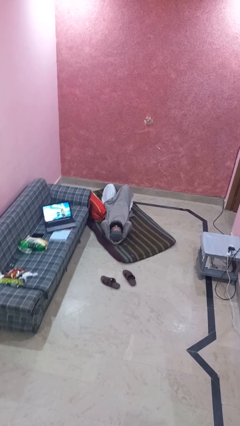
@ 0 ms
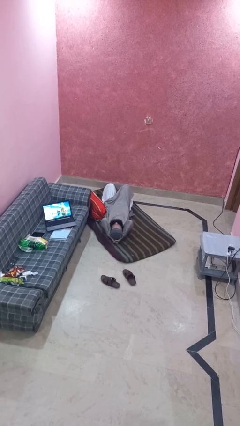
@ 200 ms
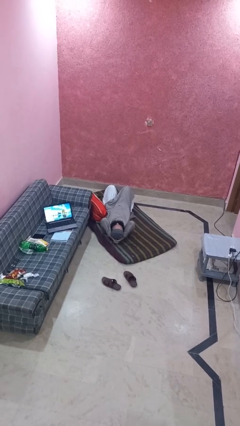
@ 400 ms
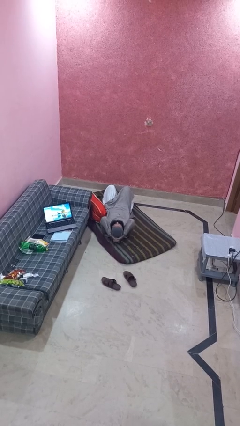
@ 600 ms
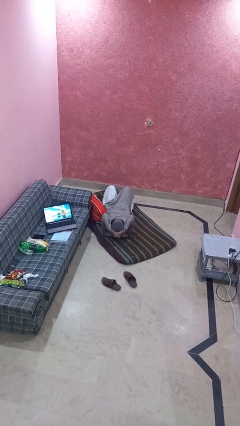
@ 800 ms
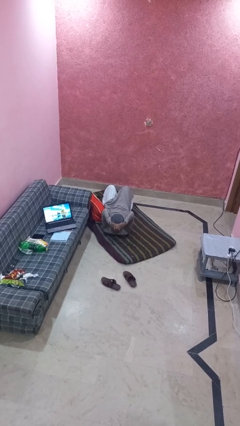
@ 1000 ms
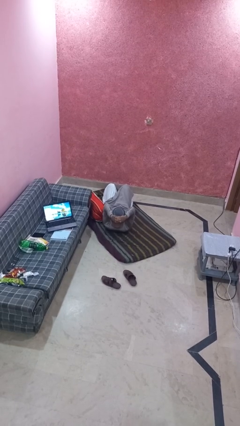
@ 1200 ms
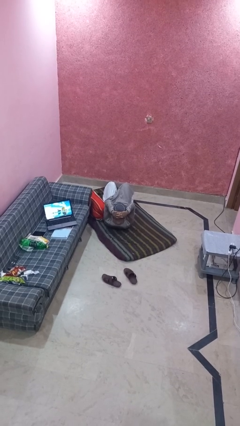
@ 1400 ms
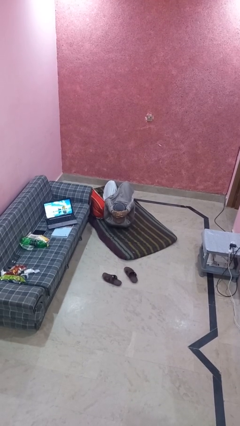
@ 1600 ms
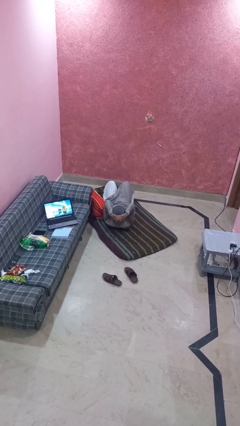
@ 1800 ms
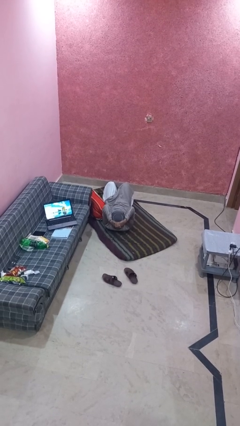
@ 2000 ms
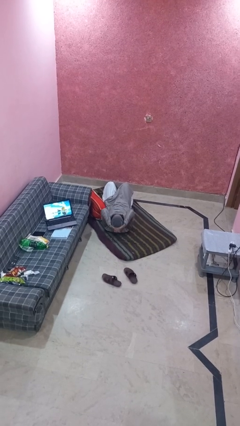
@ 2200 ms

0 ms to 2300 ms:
person exercises with situp

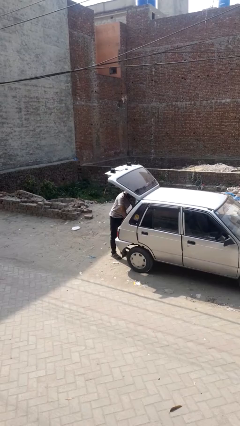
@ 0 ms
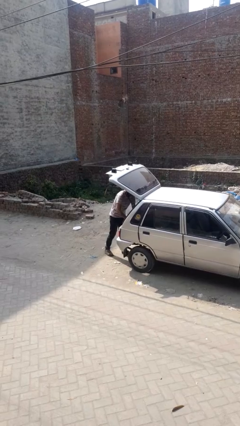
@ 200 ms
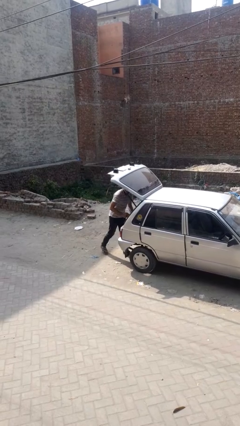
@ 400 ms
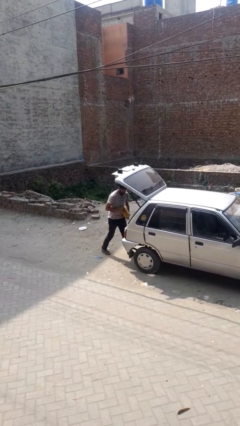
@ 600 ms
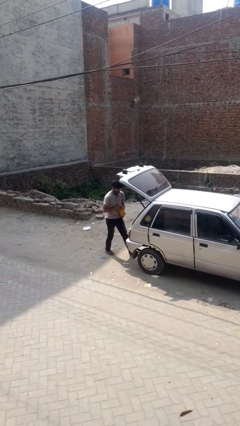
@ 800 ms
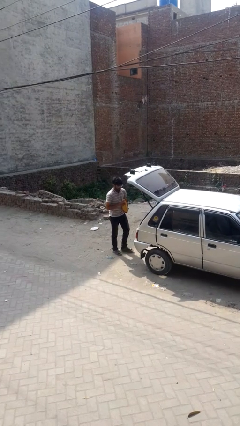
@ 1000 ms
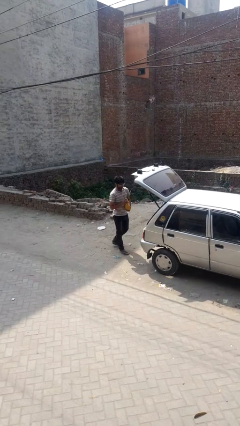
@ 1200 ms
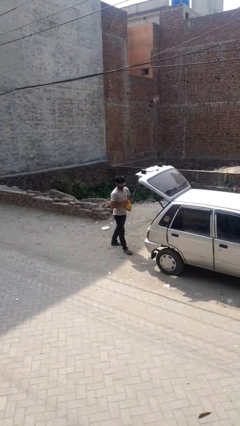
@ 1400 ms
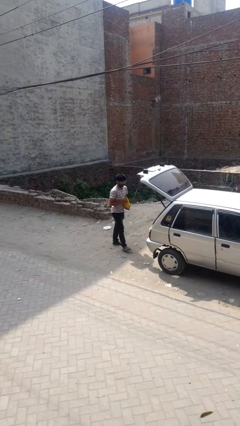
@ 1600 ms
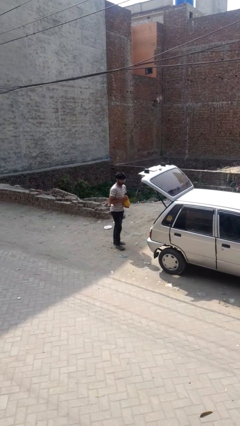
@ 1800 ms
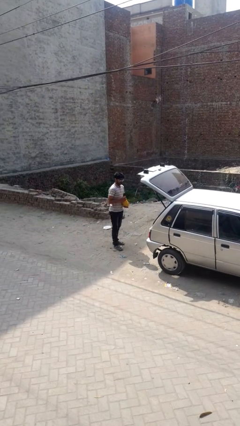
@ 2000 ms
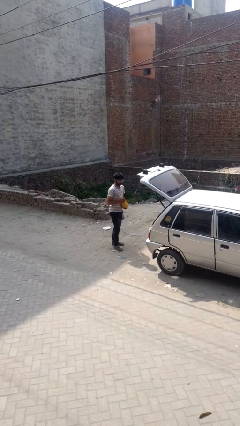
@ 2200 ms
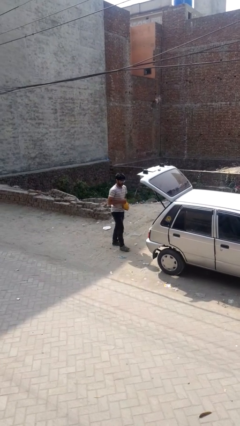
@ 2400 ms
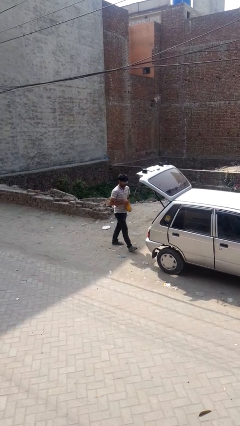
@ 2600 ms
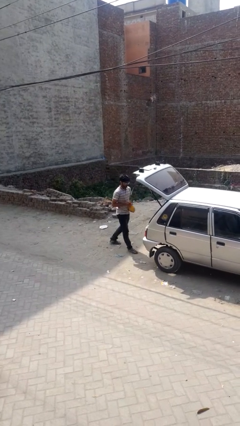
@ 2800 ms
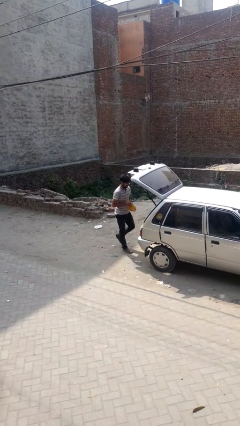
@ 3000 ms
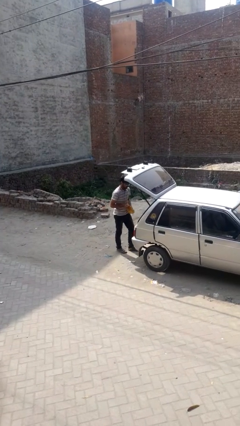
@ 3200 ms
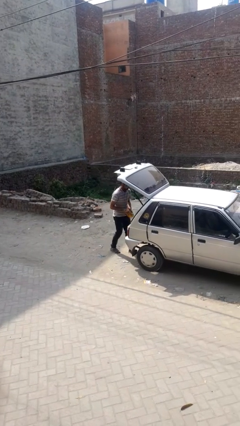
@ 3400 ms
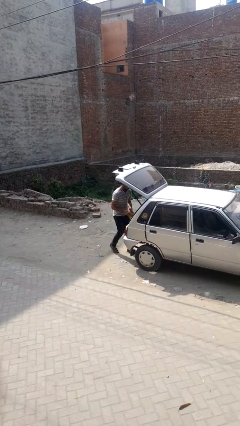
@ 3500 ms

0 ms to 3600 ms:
person unloads car

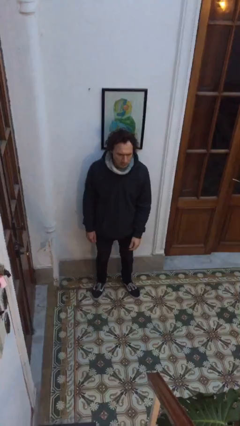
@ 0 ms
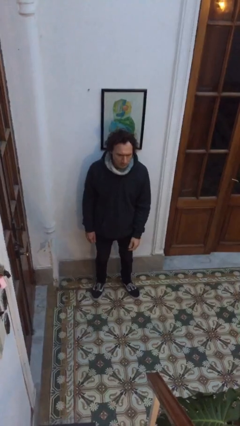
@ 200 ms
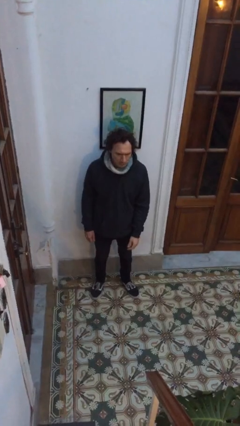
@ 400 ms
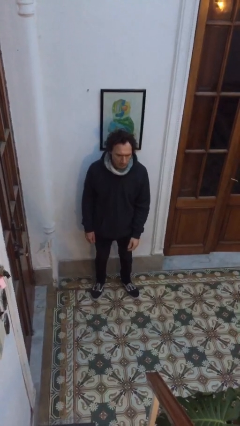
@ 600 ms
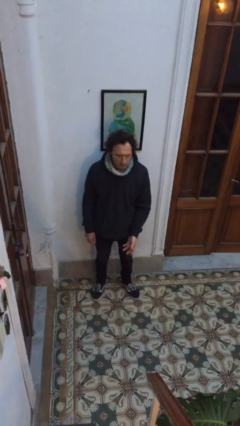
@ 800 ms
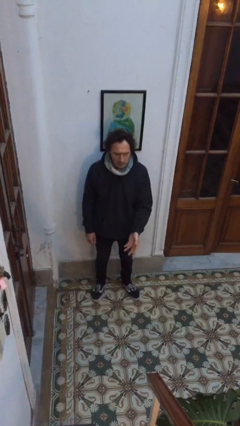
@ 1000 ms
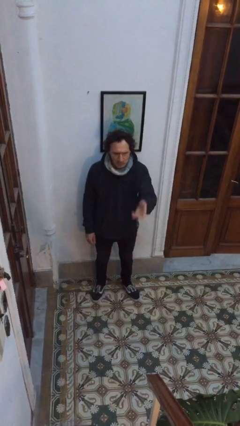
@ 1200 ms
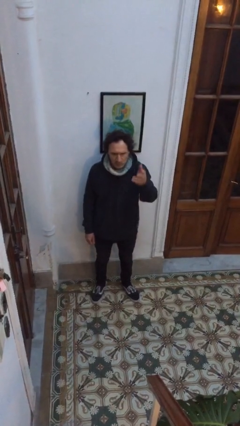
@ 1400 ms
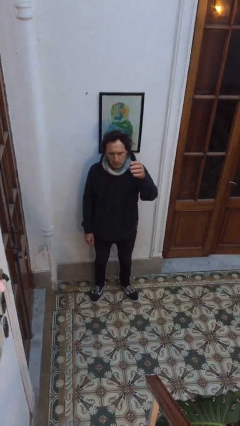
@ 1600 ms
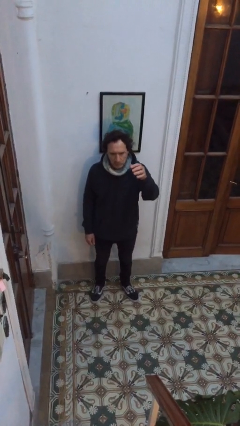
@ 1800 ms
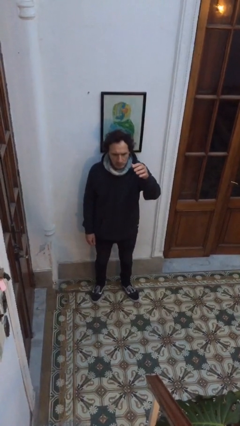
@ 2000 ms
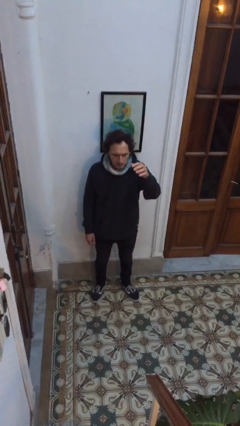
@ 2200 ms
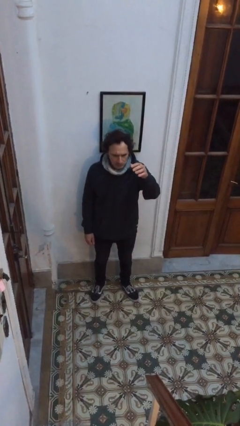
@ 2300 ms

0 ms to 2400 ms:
person gestures swipe up

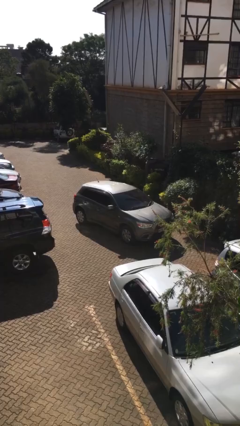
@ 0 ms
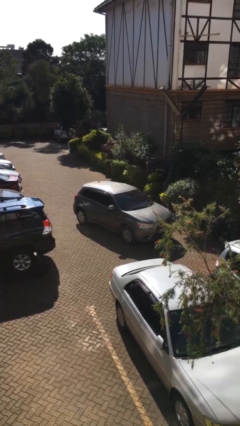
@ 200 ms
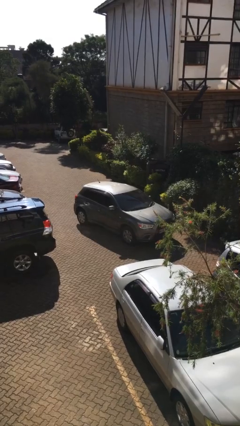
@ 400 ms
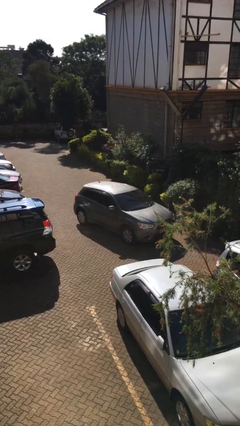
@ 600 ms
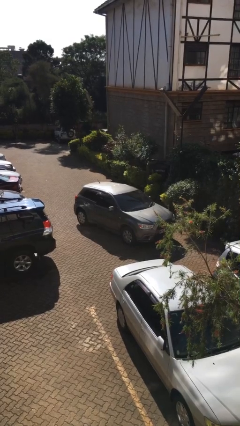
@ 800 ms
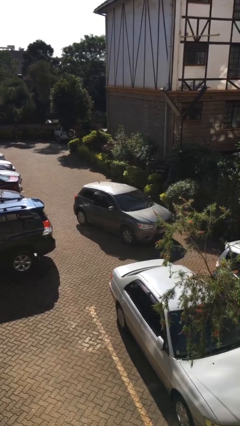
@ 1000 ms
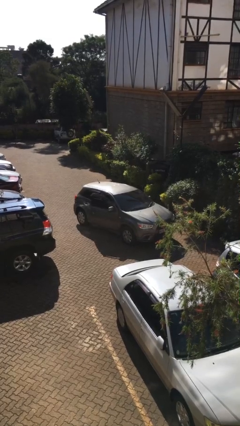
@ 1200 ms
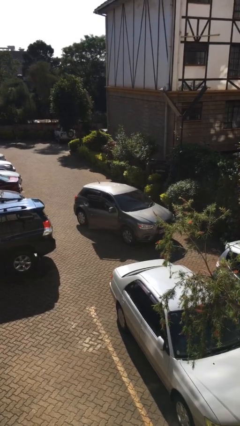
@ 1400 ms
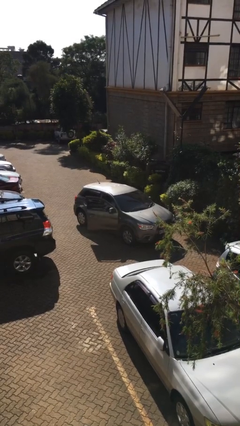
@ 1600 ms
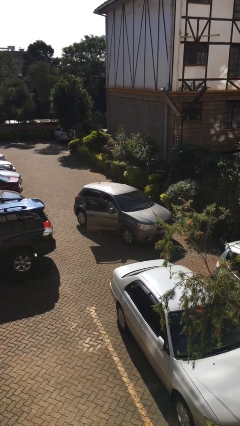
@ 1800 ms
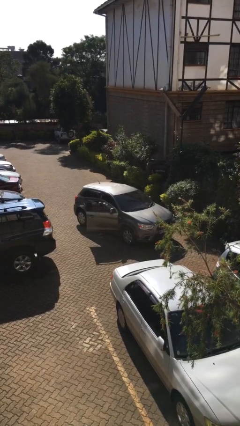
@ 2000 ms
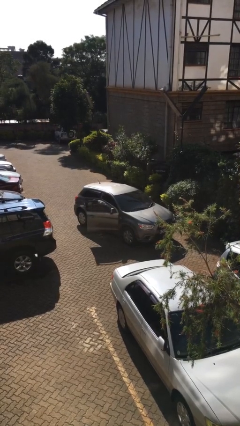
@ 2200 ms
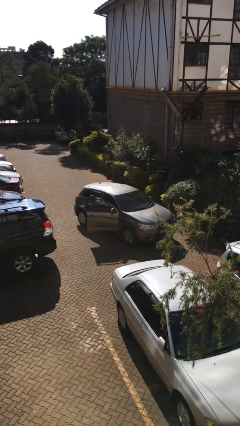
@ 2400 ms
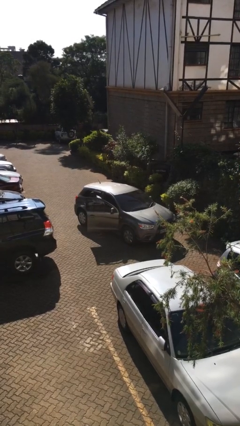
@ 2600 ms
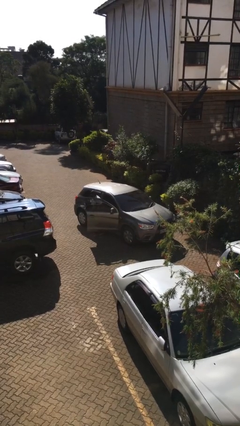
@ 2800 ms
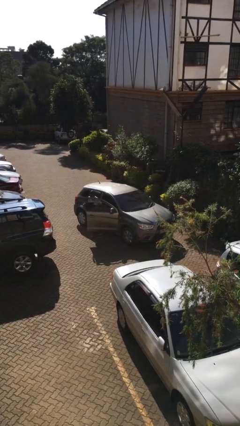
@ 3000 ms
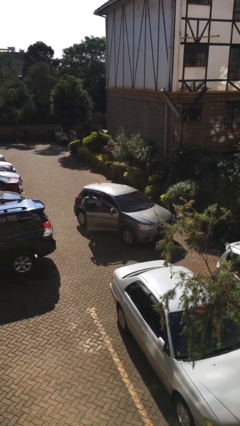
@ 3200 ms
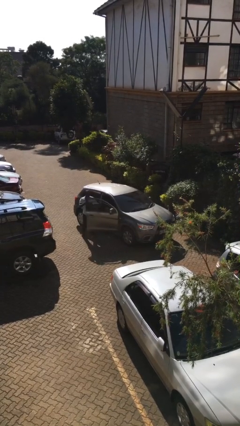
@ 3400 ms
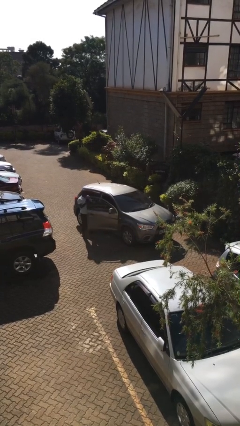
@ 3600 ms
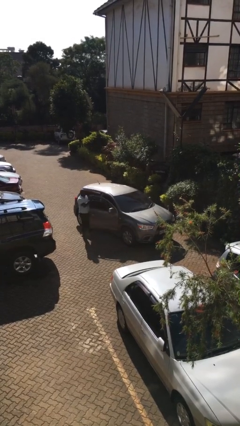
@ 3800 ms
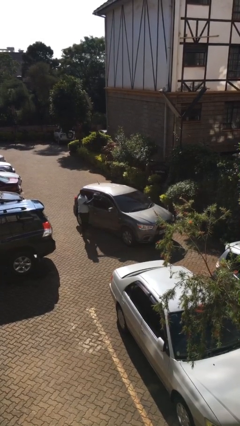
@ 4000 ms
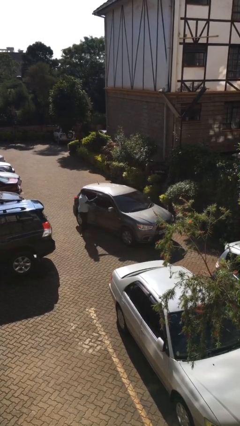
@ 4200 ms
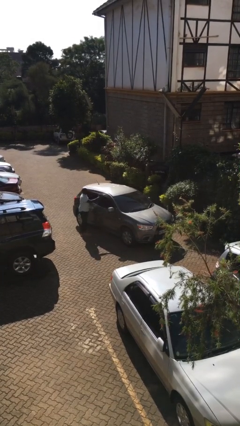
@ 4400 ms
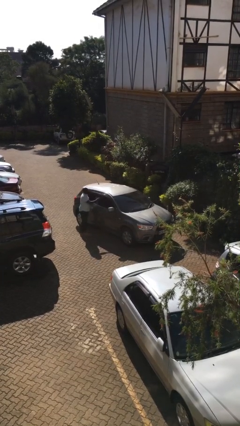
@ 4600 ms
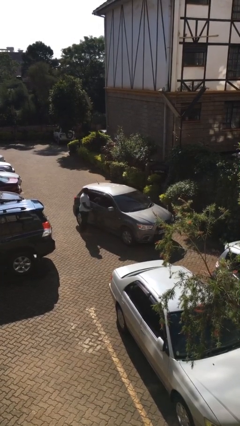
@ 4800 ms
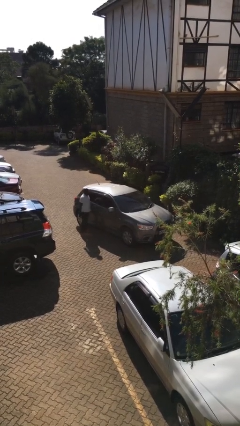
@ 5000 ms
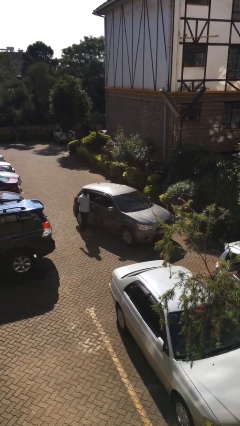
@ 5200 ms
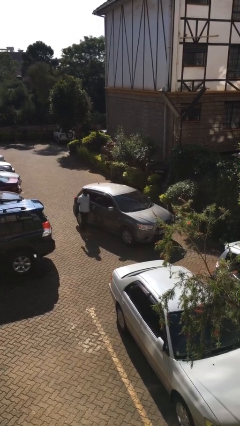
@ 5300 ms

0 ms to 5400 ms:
car drops off person

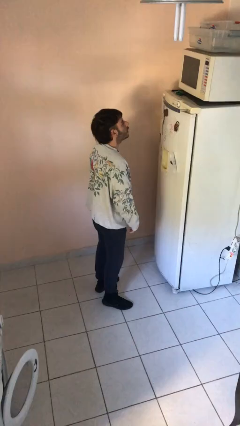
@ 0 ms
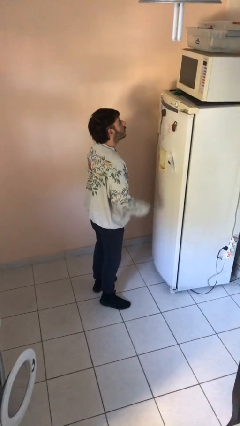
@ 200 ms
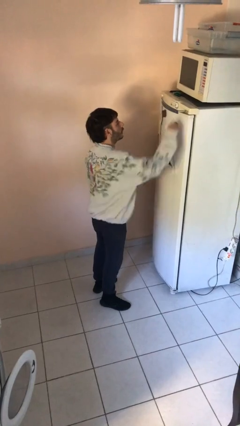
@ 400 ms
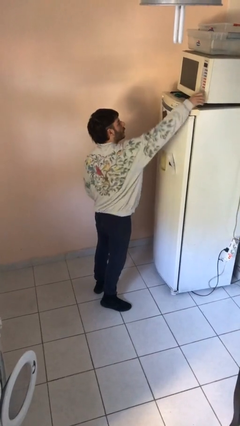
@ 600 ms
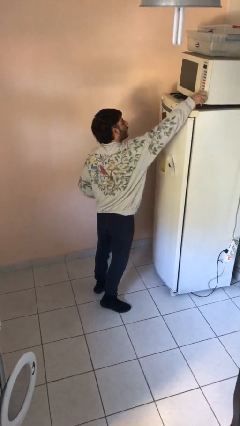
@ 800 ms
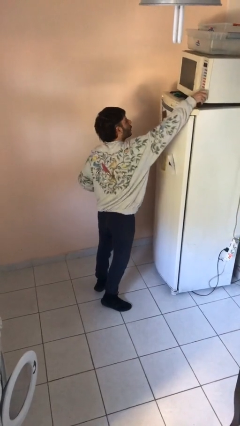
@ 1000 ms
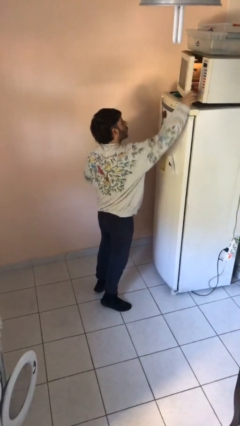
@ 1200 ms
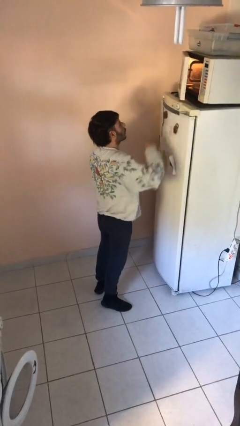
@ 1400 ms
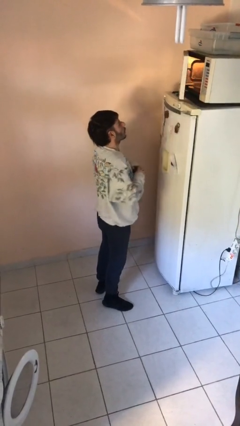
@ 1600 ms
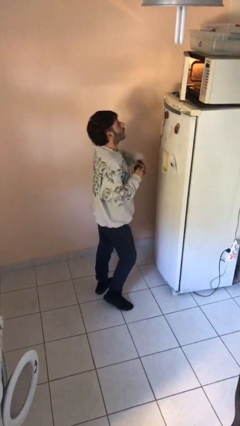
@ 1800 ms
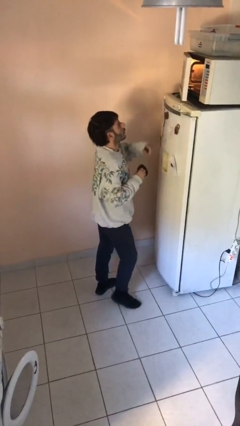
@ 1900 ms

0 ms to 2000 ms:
person opens microwave

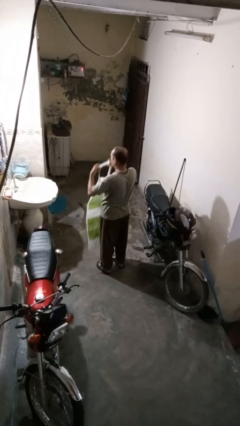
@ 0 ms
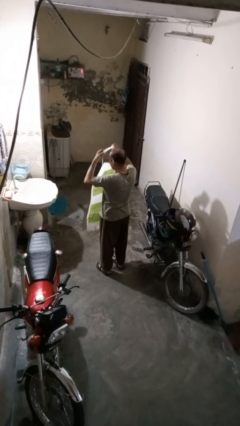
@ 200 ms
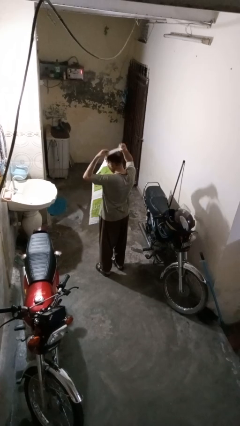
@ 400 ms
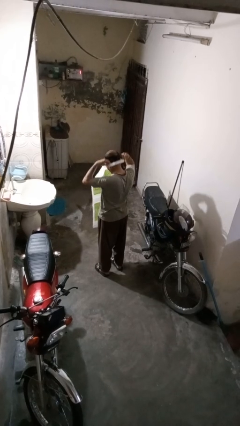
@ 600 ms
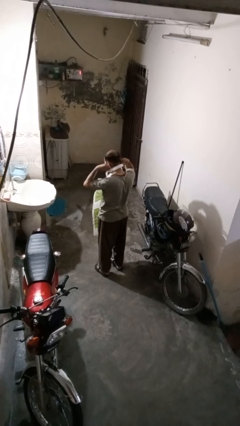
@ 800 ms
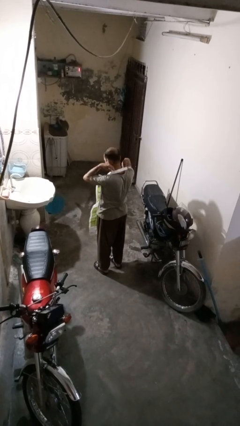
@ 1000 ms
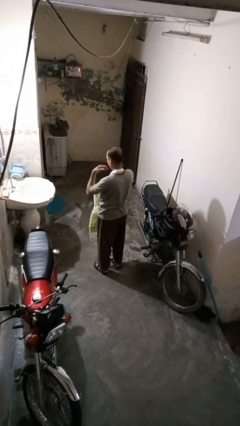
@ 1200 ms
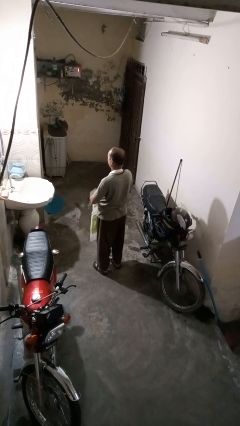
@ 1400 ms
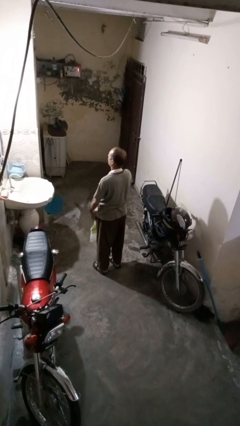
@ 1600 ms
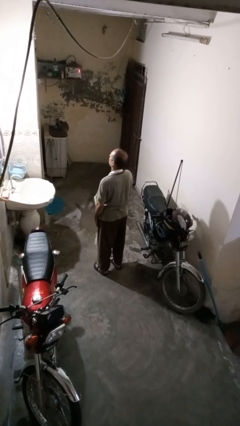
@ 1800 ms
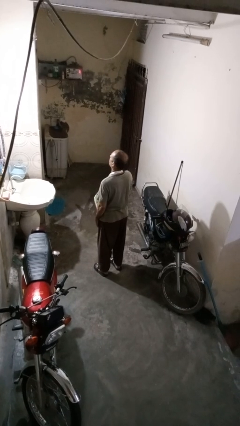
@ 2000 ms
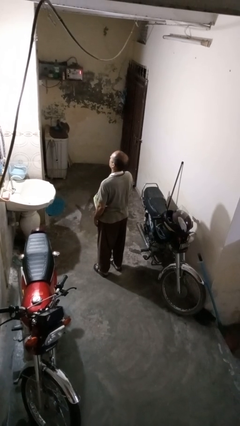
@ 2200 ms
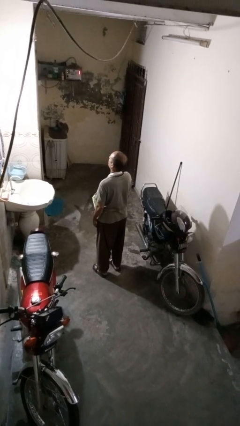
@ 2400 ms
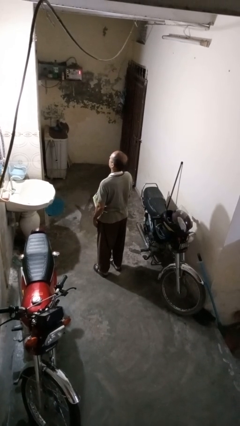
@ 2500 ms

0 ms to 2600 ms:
person puts on apron
